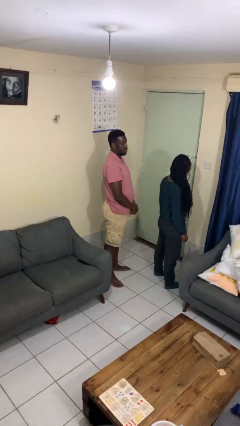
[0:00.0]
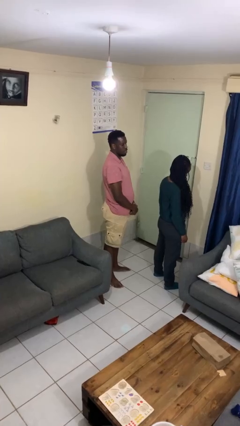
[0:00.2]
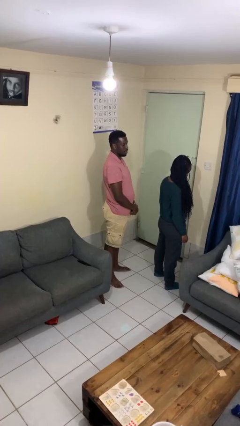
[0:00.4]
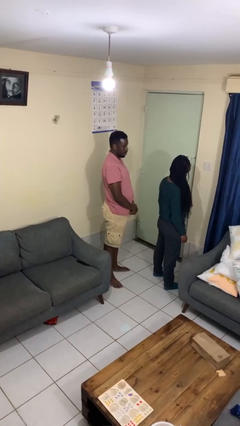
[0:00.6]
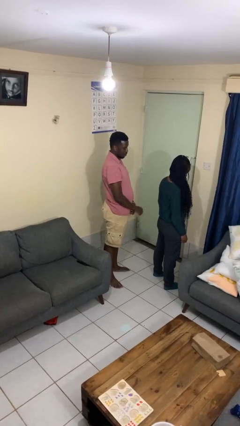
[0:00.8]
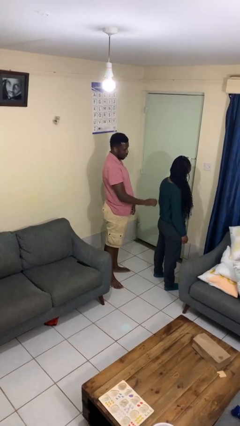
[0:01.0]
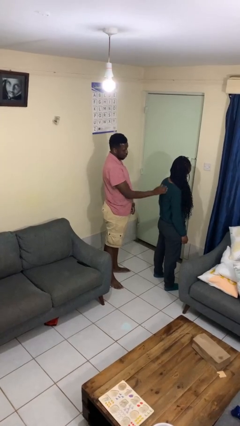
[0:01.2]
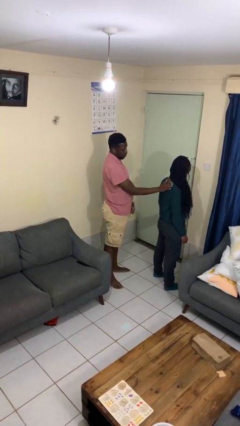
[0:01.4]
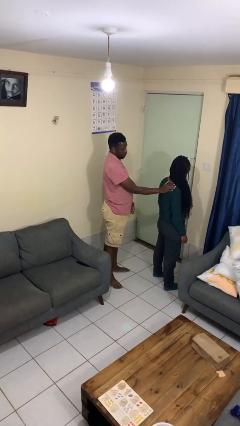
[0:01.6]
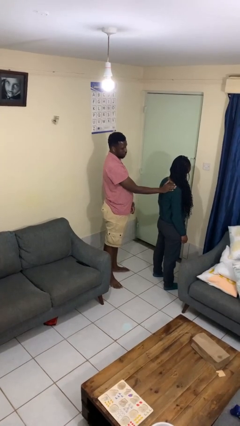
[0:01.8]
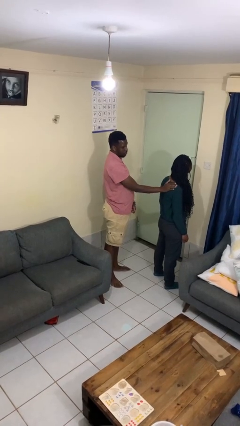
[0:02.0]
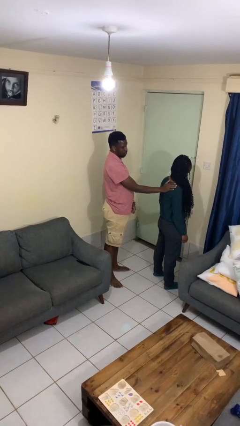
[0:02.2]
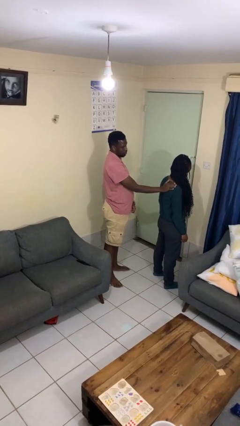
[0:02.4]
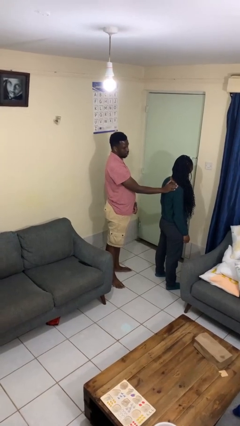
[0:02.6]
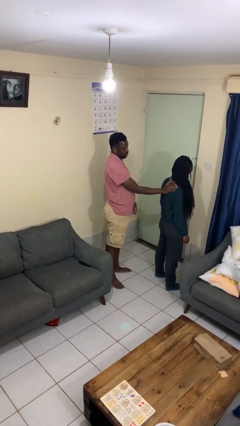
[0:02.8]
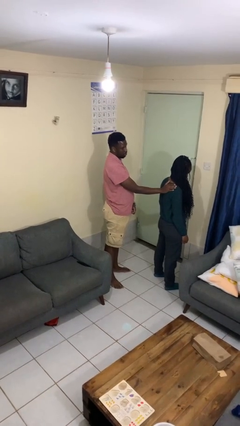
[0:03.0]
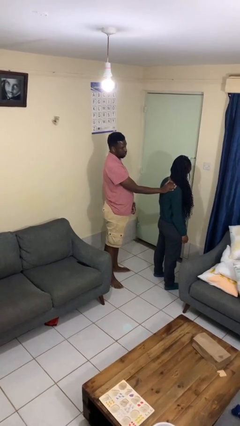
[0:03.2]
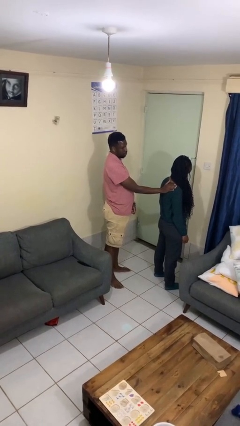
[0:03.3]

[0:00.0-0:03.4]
person touches back of person

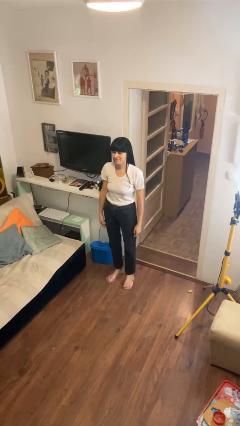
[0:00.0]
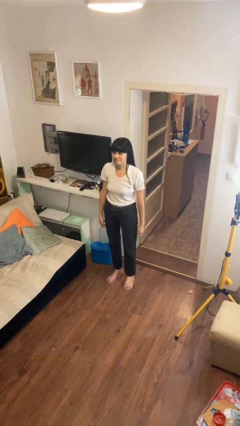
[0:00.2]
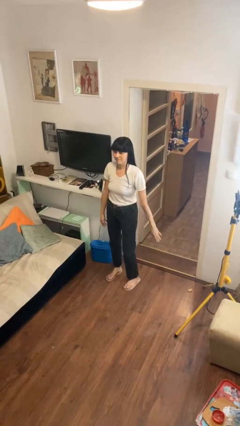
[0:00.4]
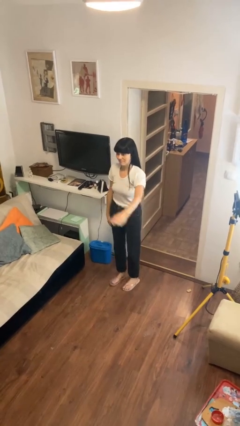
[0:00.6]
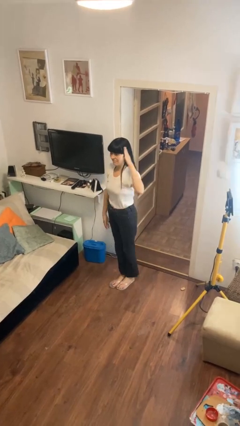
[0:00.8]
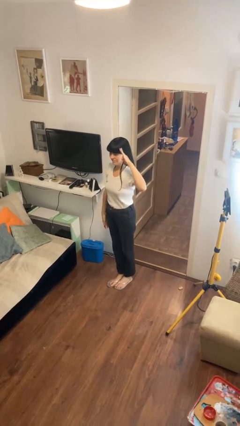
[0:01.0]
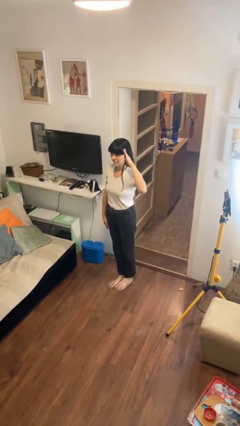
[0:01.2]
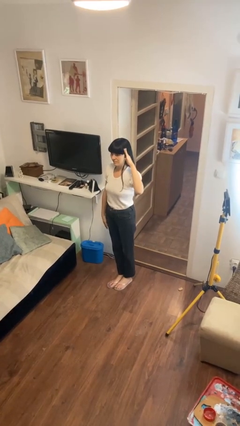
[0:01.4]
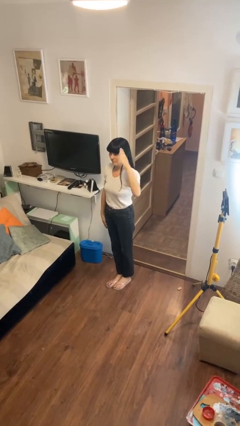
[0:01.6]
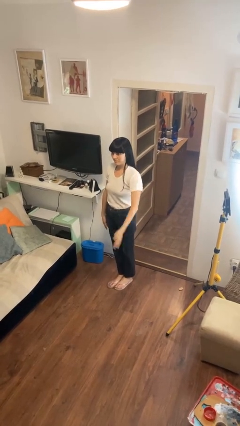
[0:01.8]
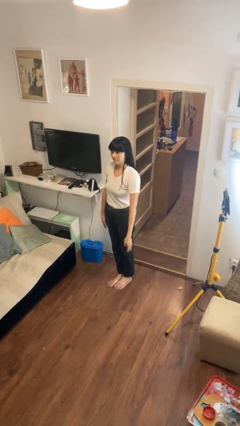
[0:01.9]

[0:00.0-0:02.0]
person salutes

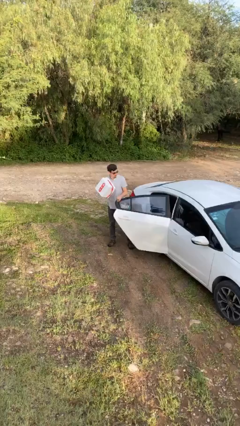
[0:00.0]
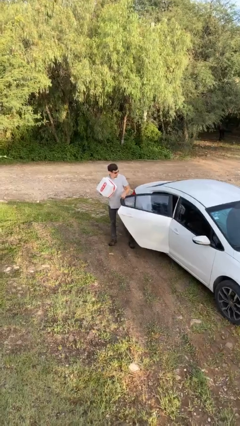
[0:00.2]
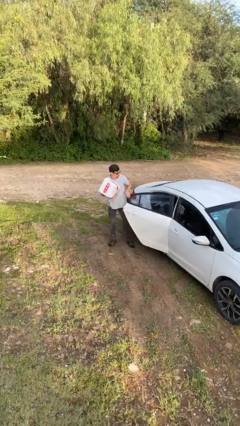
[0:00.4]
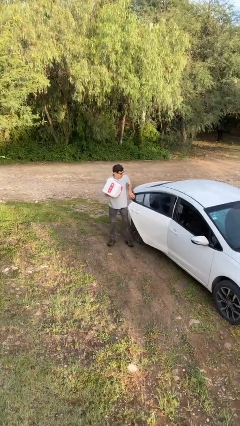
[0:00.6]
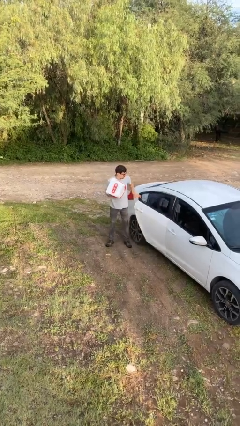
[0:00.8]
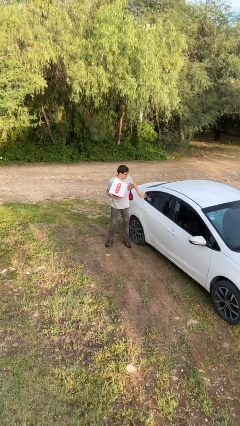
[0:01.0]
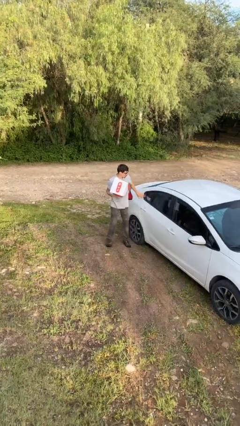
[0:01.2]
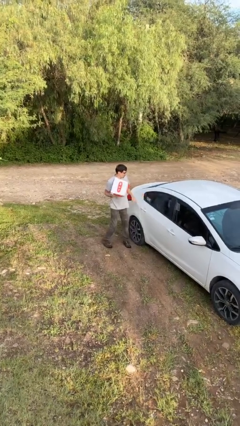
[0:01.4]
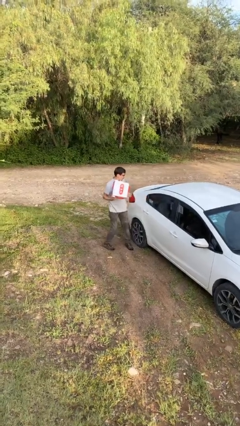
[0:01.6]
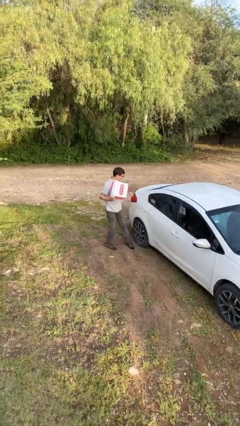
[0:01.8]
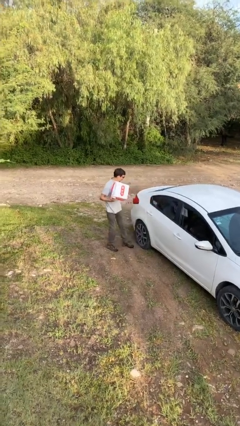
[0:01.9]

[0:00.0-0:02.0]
person closes car door

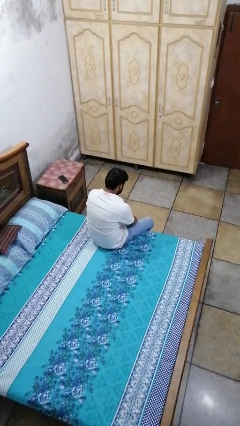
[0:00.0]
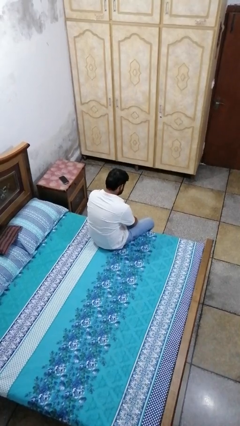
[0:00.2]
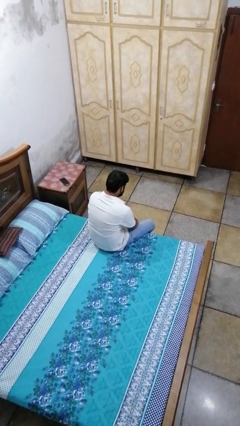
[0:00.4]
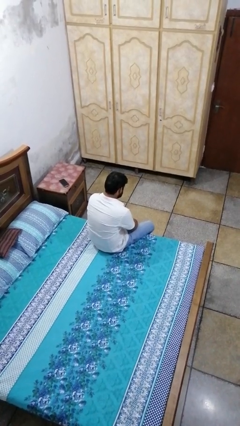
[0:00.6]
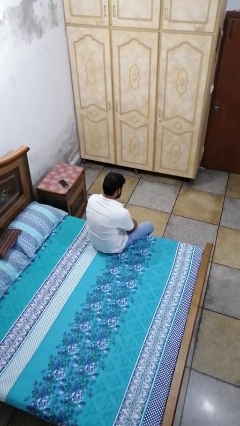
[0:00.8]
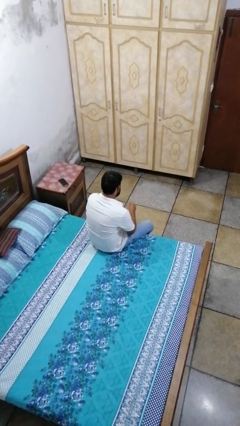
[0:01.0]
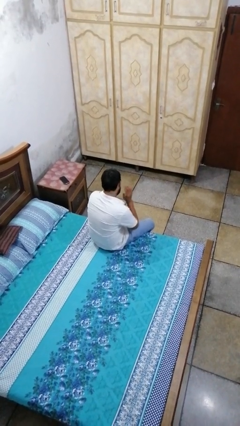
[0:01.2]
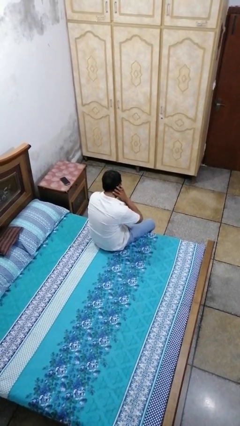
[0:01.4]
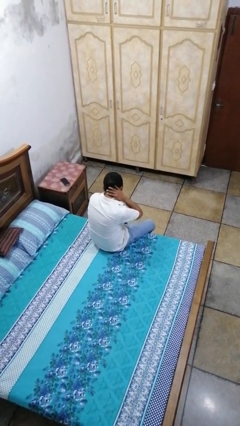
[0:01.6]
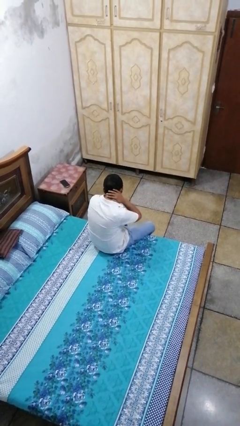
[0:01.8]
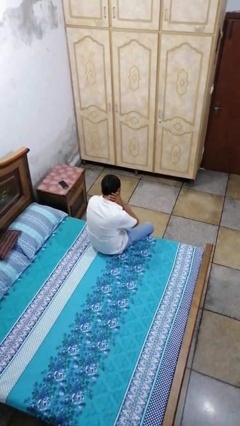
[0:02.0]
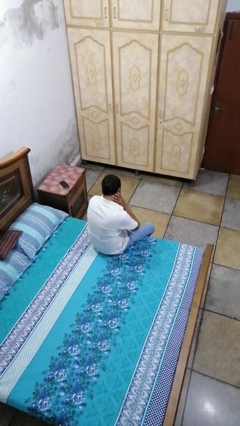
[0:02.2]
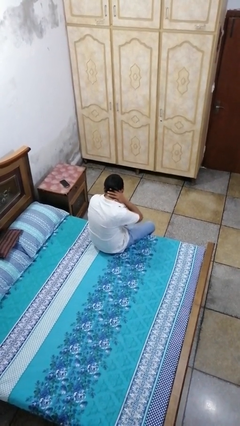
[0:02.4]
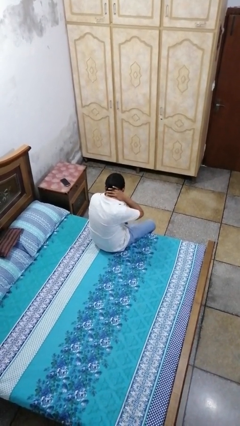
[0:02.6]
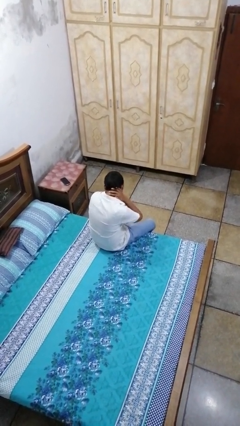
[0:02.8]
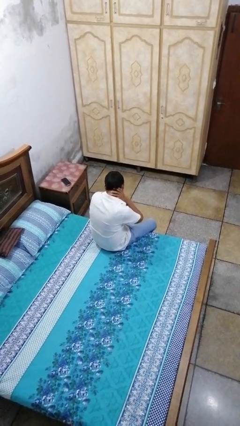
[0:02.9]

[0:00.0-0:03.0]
person rubs neck

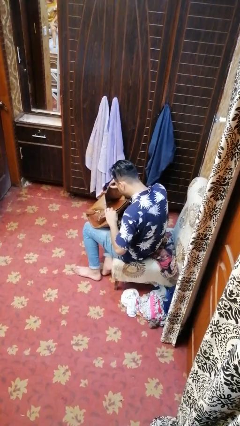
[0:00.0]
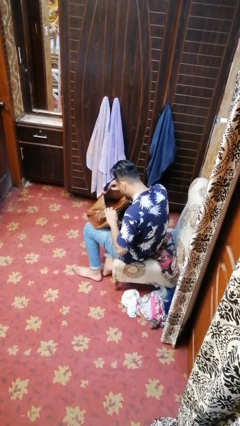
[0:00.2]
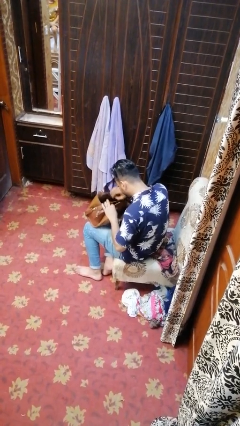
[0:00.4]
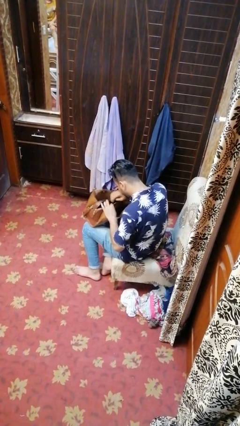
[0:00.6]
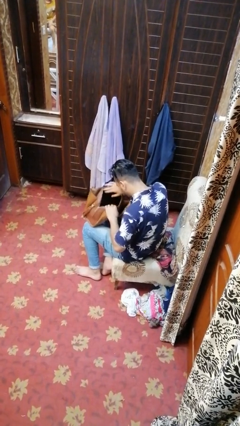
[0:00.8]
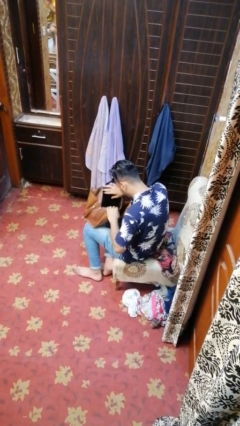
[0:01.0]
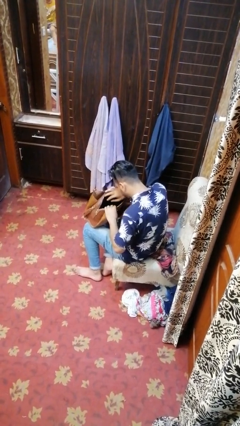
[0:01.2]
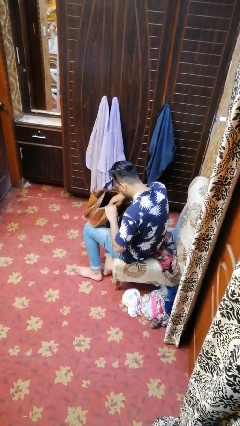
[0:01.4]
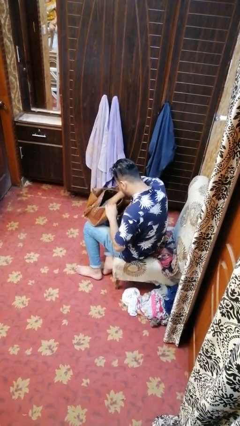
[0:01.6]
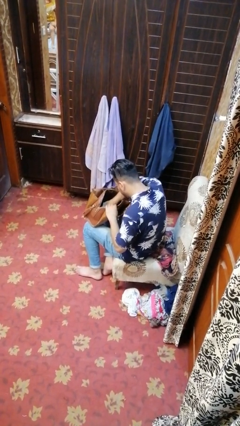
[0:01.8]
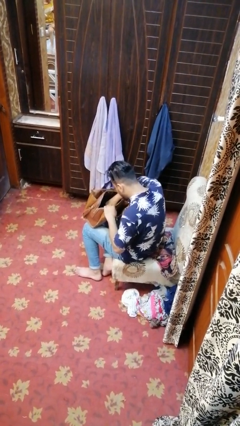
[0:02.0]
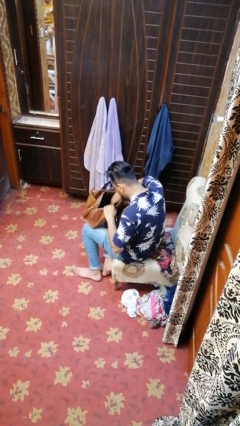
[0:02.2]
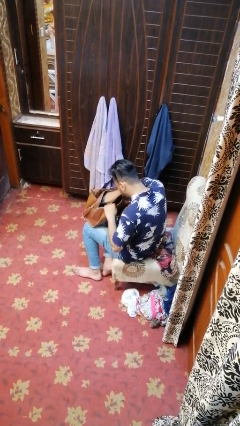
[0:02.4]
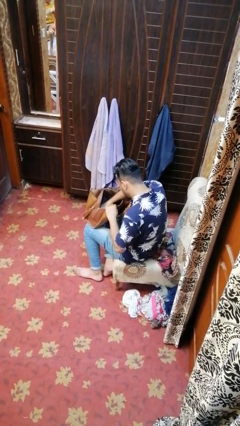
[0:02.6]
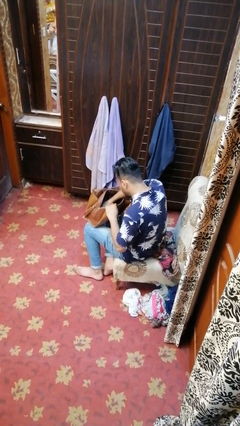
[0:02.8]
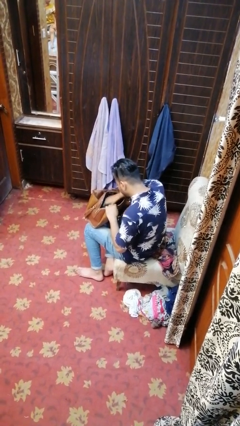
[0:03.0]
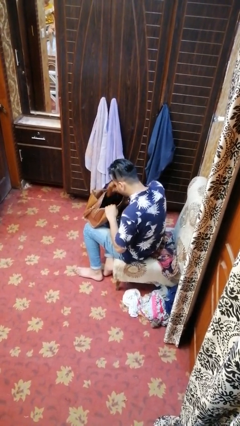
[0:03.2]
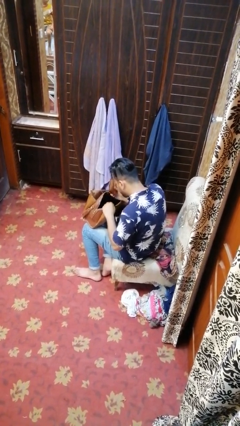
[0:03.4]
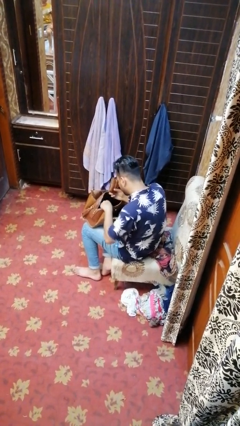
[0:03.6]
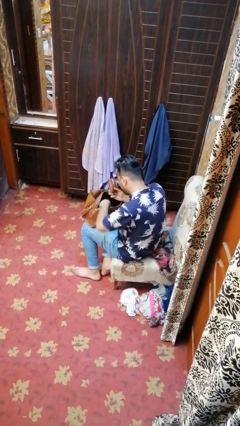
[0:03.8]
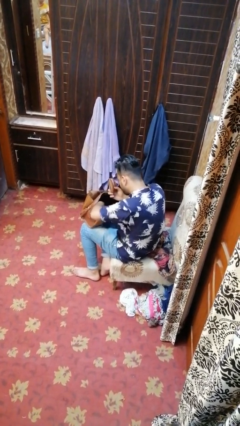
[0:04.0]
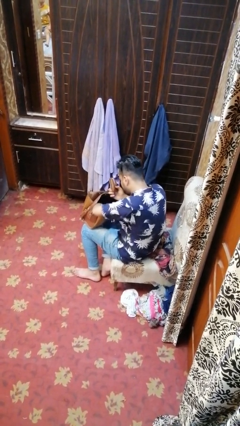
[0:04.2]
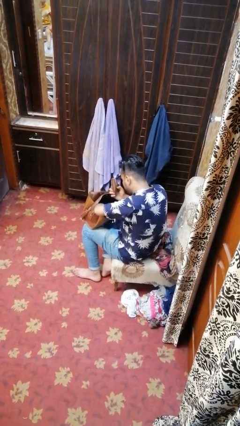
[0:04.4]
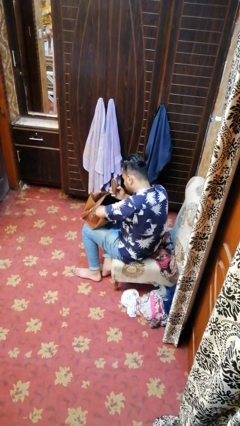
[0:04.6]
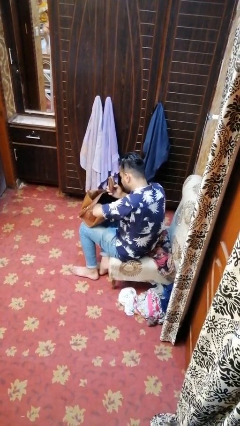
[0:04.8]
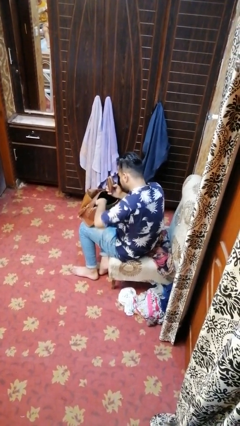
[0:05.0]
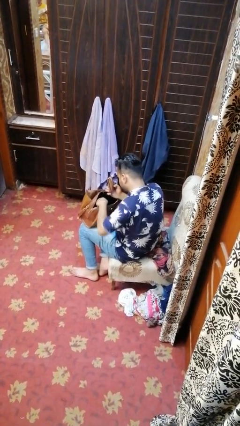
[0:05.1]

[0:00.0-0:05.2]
person takes object from purse

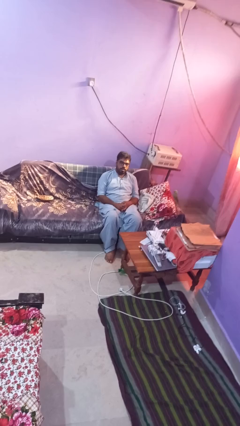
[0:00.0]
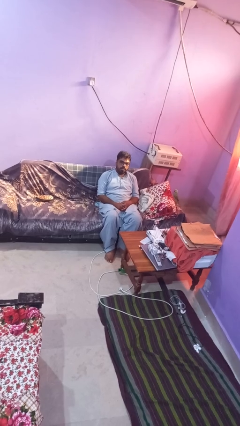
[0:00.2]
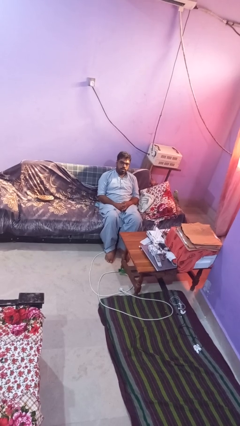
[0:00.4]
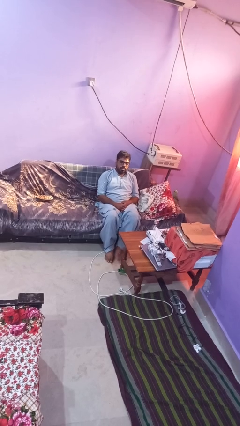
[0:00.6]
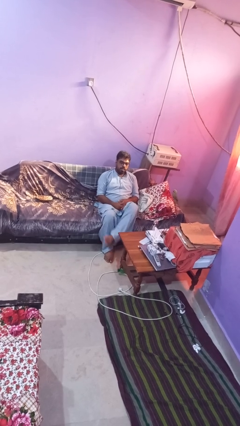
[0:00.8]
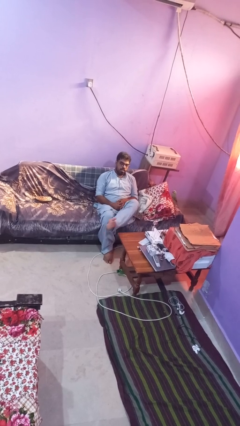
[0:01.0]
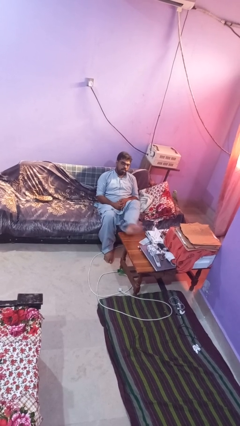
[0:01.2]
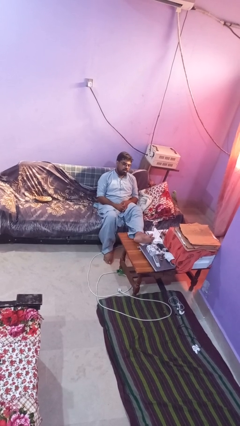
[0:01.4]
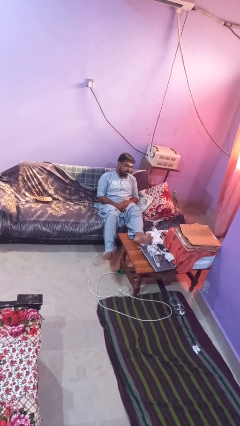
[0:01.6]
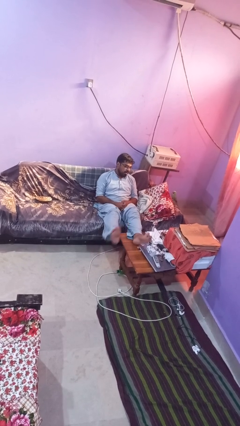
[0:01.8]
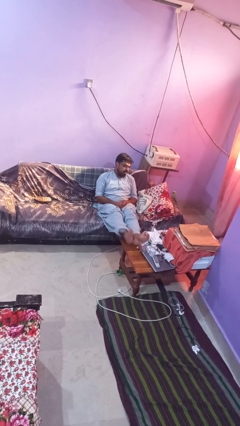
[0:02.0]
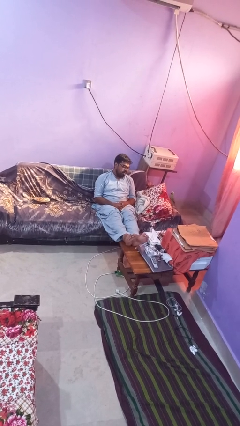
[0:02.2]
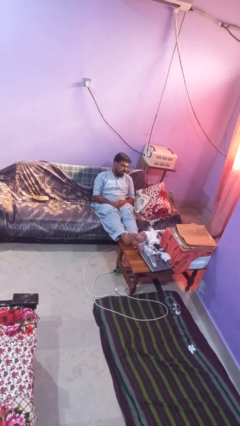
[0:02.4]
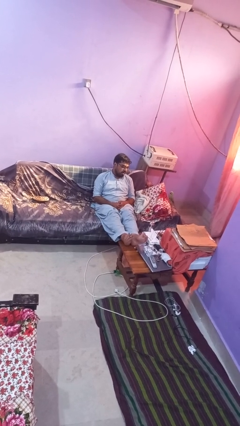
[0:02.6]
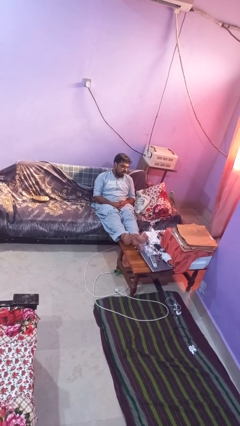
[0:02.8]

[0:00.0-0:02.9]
person puts feet up
